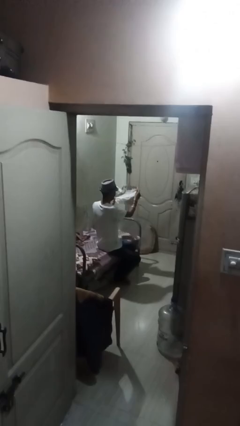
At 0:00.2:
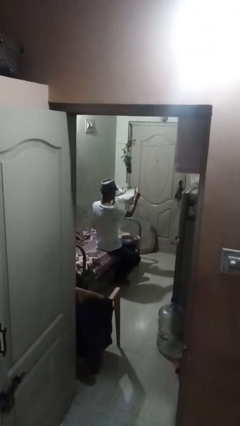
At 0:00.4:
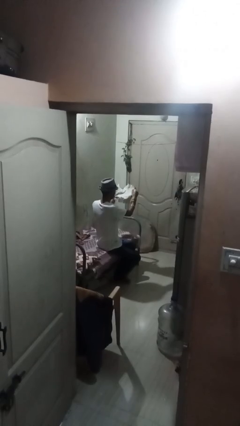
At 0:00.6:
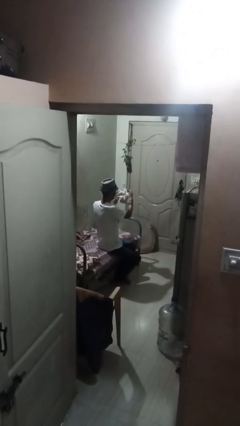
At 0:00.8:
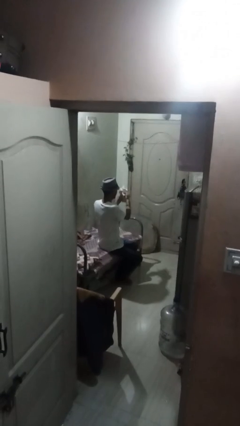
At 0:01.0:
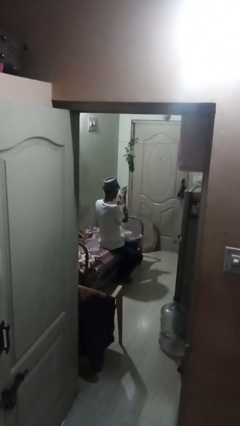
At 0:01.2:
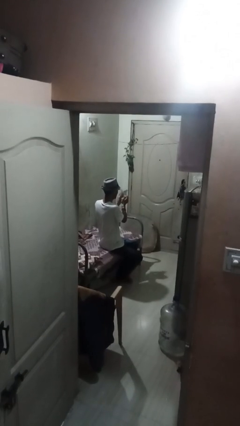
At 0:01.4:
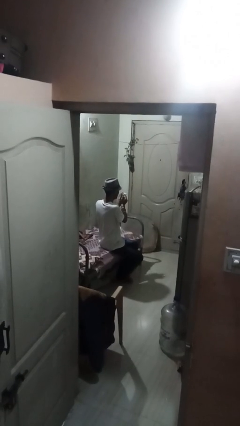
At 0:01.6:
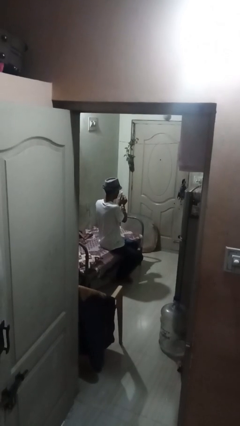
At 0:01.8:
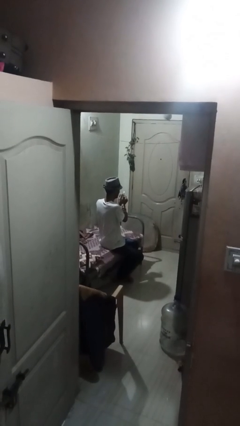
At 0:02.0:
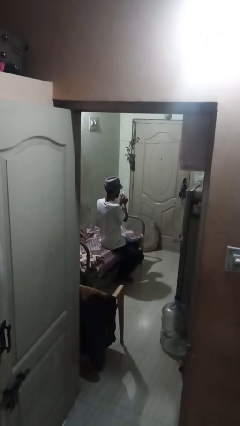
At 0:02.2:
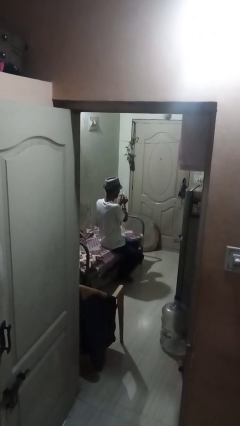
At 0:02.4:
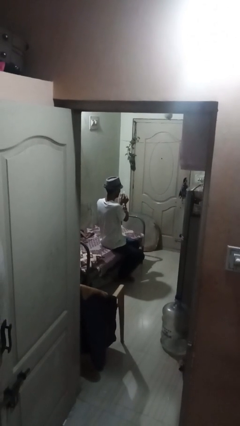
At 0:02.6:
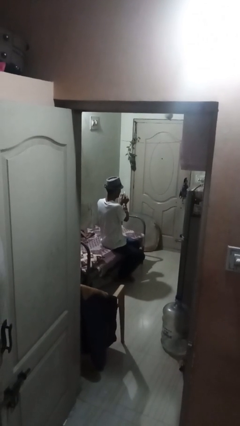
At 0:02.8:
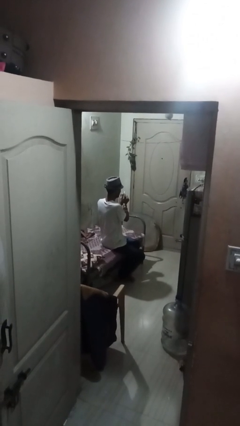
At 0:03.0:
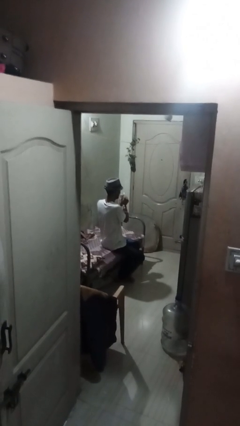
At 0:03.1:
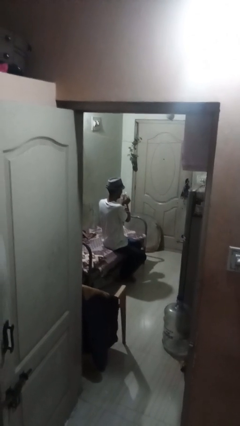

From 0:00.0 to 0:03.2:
person crumples paper

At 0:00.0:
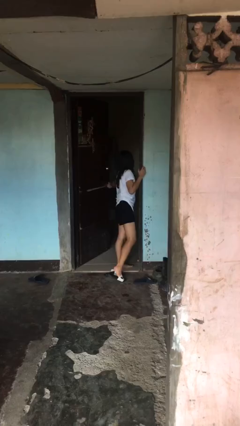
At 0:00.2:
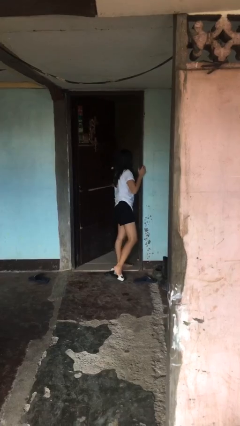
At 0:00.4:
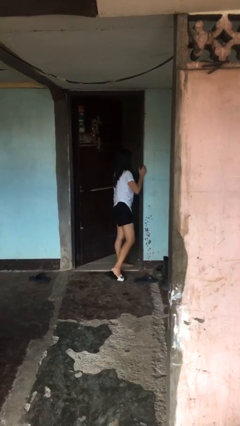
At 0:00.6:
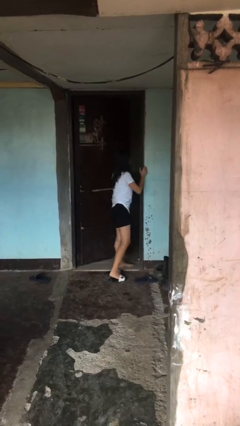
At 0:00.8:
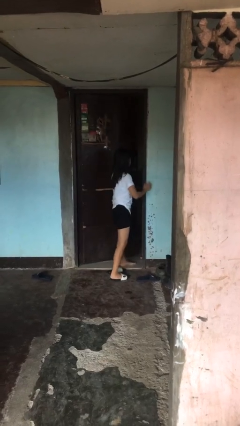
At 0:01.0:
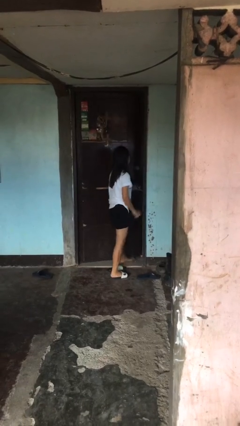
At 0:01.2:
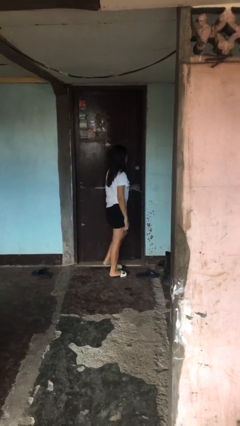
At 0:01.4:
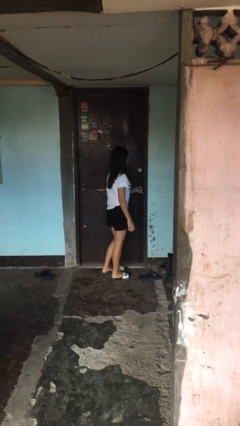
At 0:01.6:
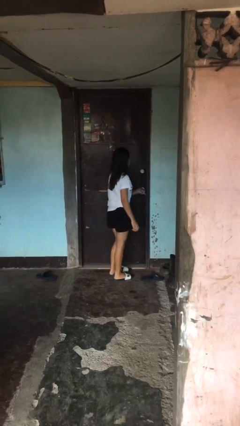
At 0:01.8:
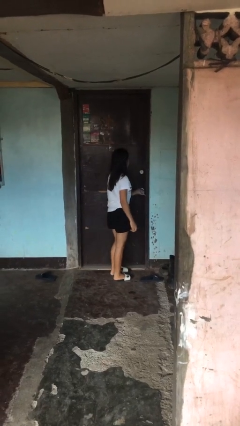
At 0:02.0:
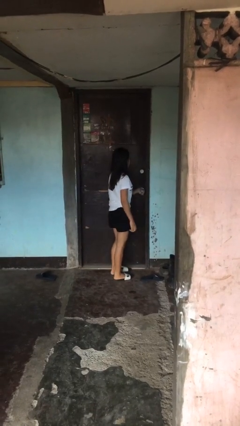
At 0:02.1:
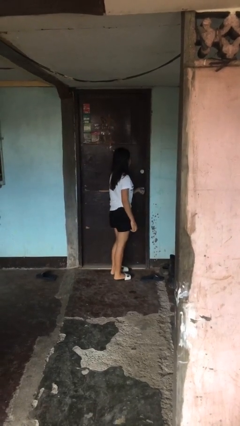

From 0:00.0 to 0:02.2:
person closes facility door

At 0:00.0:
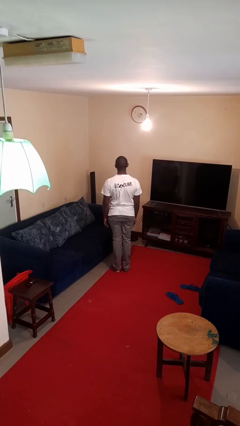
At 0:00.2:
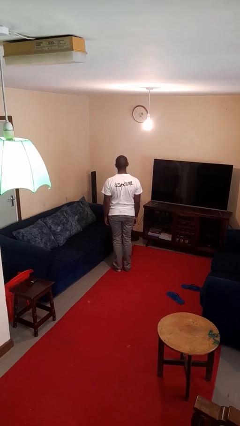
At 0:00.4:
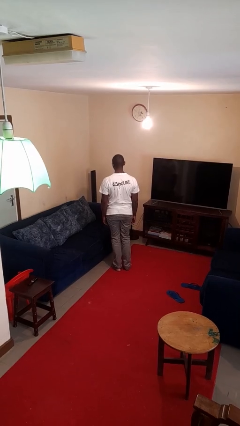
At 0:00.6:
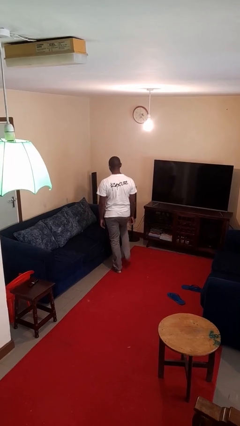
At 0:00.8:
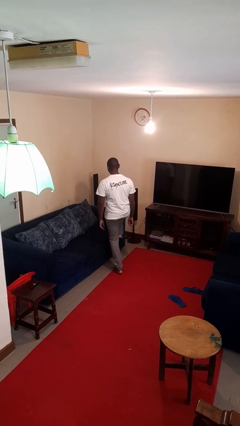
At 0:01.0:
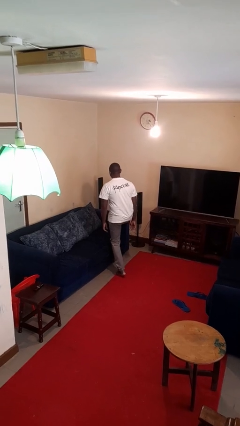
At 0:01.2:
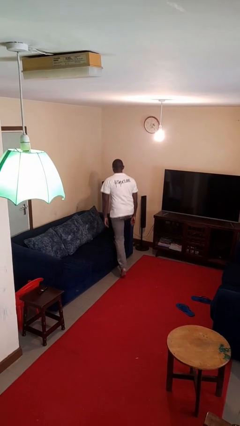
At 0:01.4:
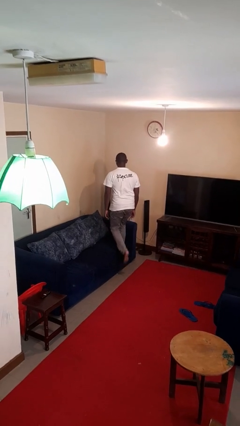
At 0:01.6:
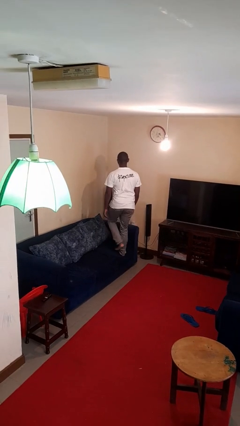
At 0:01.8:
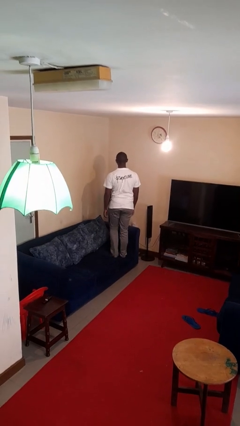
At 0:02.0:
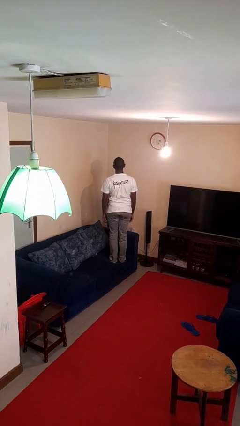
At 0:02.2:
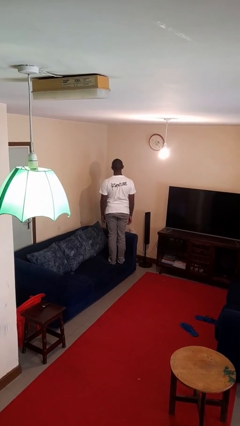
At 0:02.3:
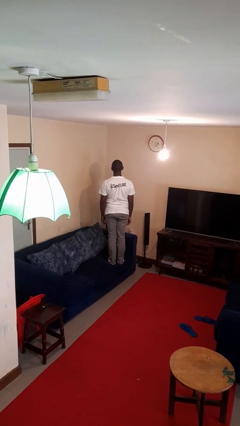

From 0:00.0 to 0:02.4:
person climbs on couch

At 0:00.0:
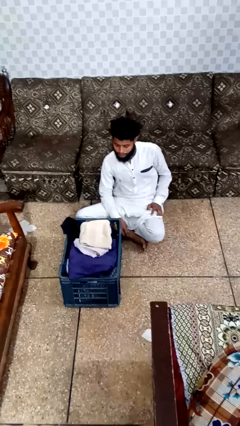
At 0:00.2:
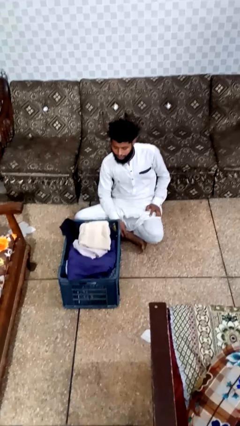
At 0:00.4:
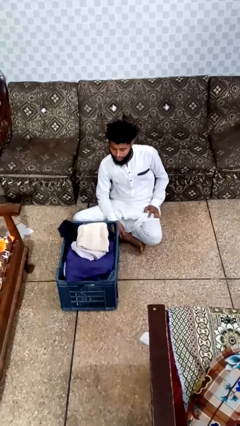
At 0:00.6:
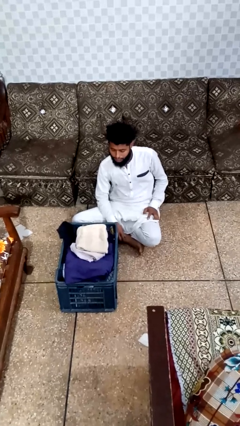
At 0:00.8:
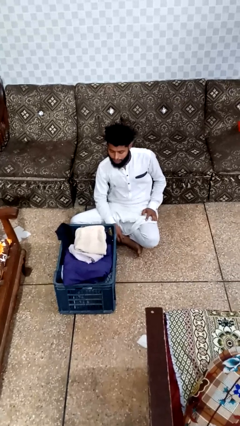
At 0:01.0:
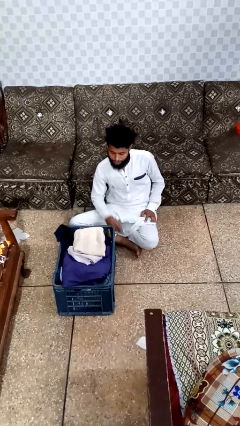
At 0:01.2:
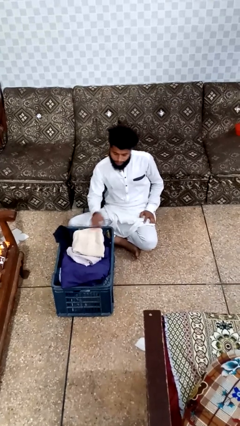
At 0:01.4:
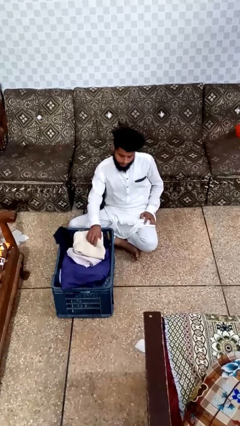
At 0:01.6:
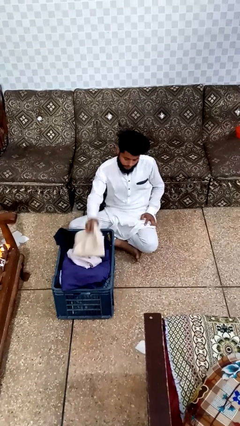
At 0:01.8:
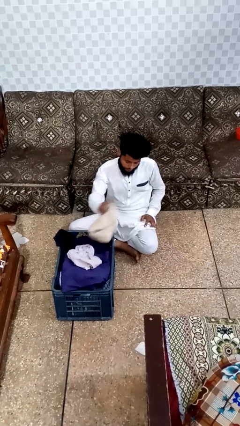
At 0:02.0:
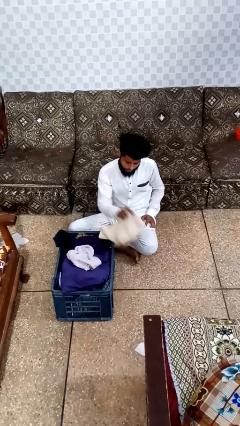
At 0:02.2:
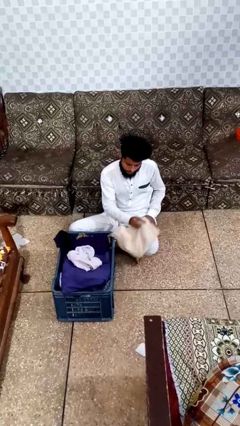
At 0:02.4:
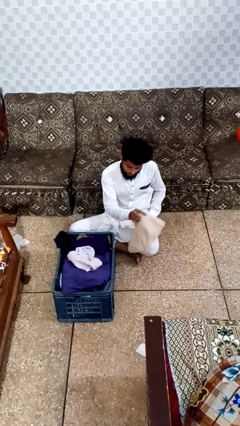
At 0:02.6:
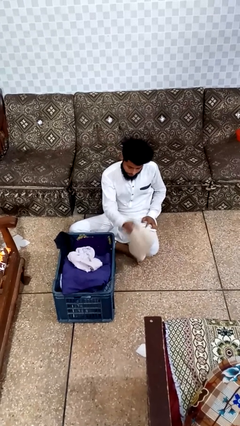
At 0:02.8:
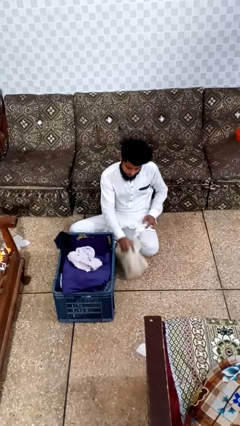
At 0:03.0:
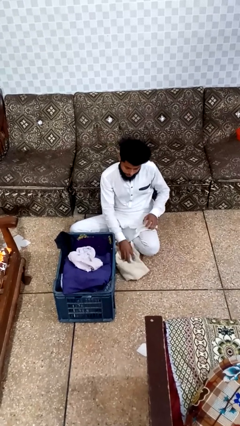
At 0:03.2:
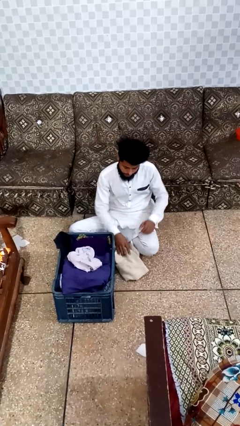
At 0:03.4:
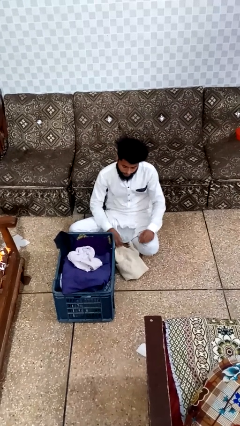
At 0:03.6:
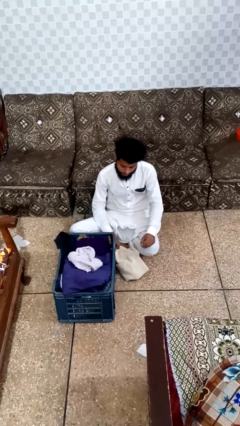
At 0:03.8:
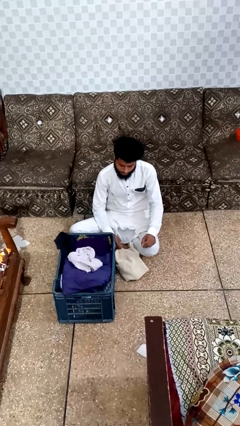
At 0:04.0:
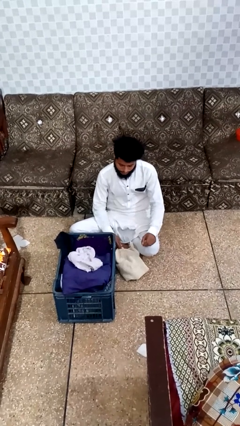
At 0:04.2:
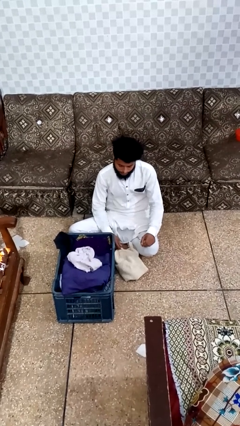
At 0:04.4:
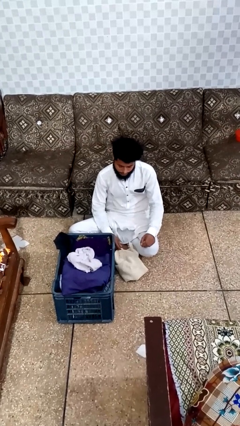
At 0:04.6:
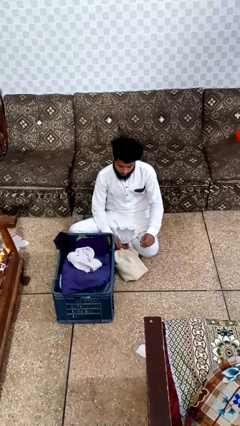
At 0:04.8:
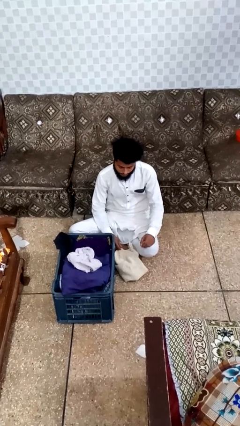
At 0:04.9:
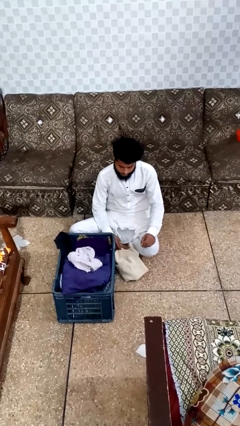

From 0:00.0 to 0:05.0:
person puts object into basket

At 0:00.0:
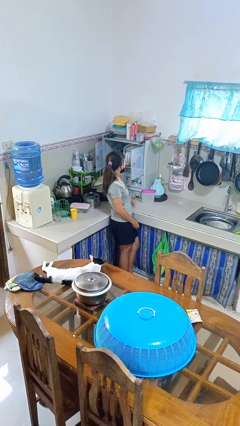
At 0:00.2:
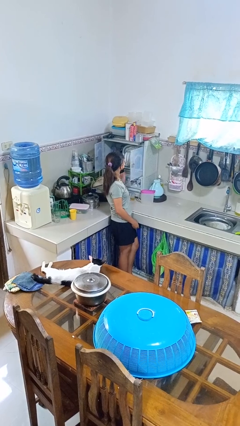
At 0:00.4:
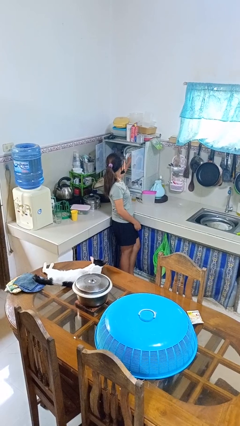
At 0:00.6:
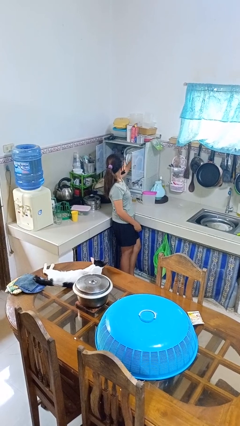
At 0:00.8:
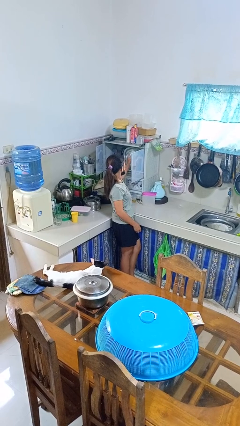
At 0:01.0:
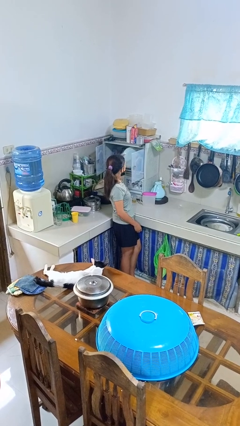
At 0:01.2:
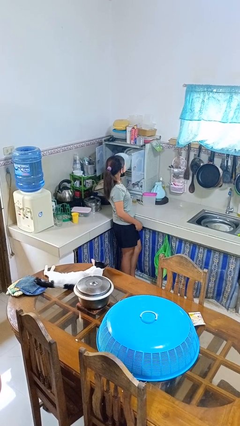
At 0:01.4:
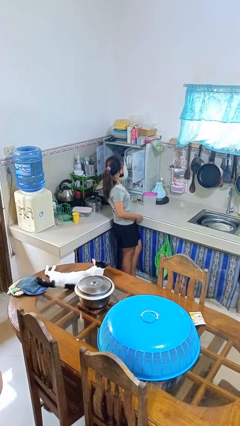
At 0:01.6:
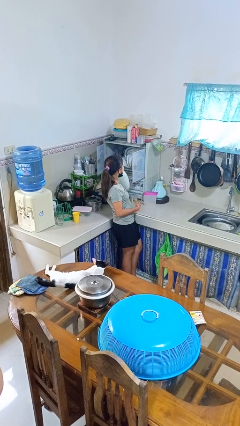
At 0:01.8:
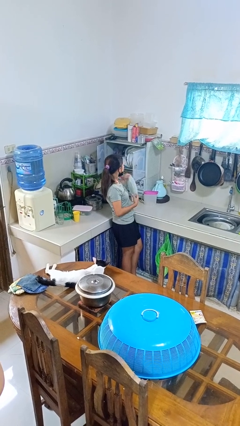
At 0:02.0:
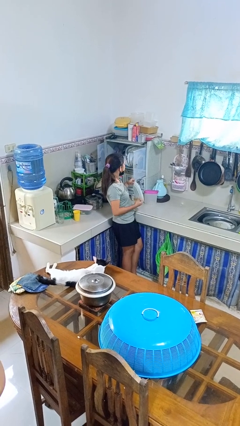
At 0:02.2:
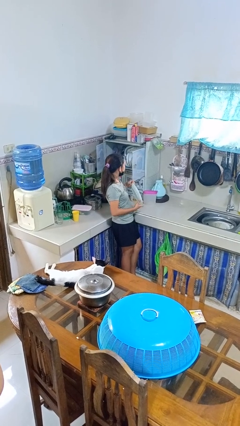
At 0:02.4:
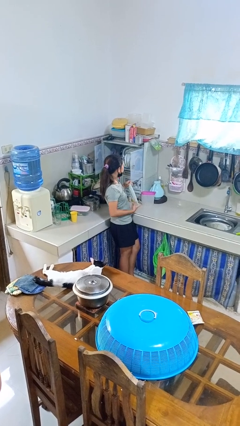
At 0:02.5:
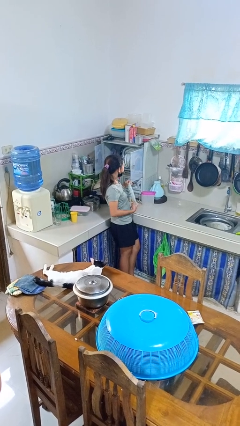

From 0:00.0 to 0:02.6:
person takes object from kitchen drawer

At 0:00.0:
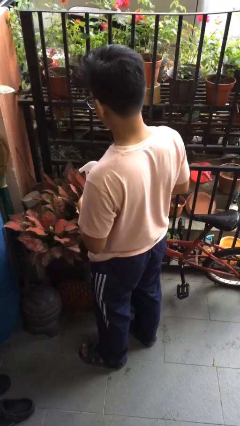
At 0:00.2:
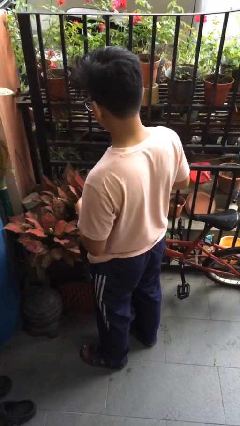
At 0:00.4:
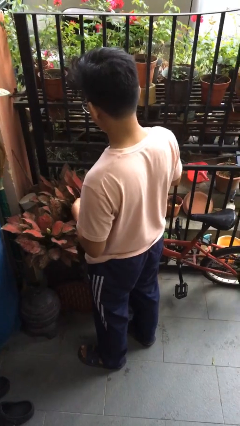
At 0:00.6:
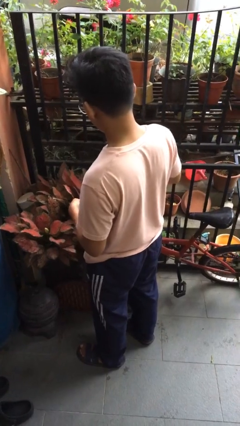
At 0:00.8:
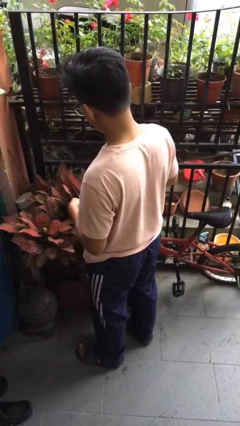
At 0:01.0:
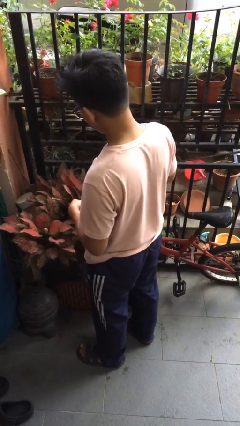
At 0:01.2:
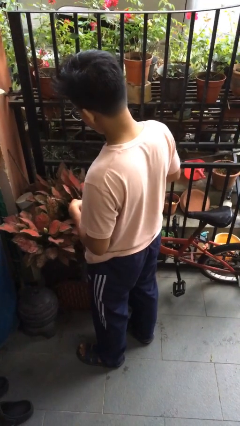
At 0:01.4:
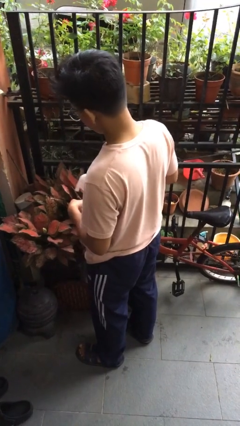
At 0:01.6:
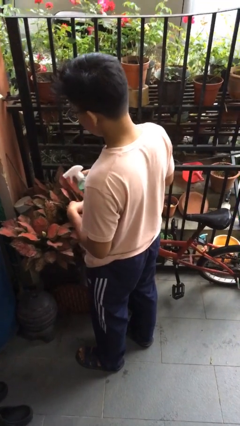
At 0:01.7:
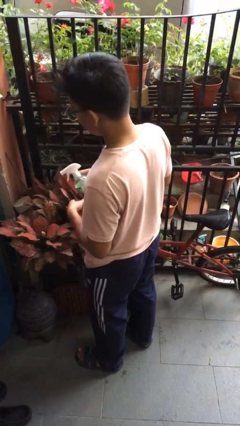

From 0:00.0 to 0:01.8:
person waters houseplant
